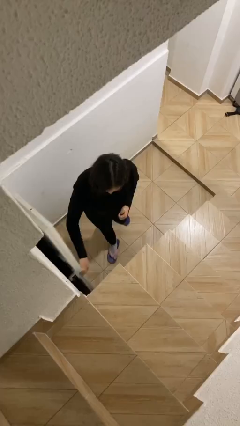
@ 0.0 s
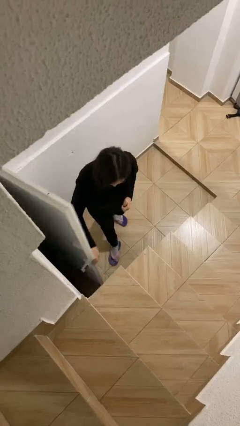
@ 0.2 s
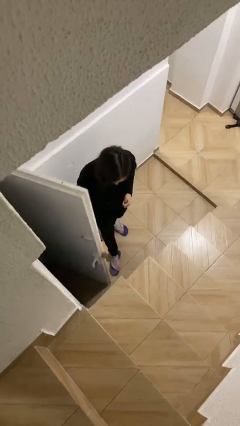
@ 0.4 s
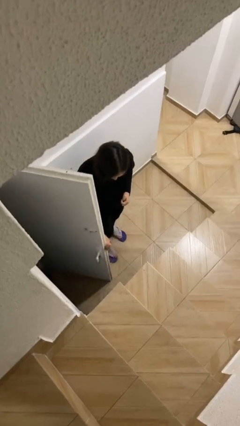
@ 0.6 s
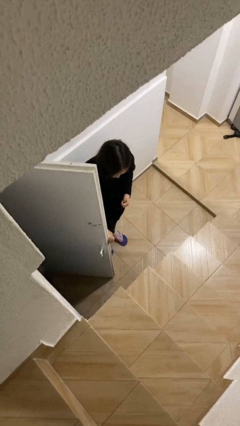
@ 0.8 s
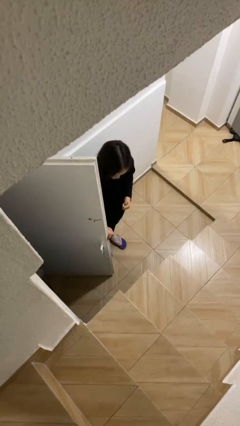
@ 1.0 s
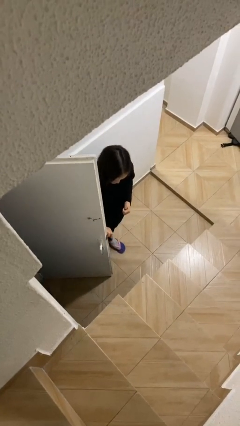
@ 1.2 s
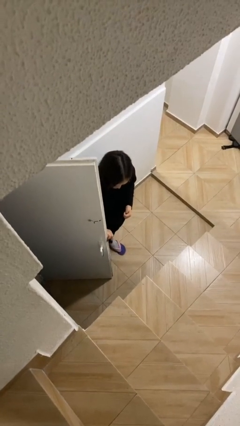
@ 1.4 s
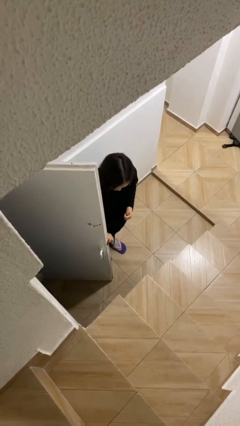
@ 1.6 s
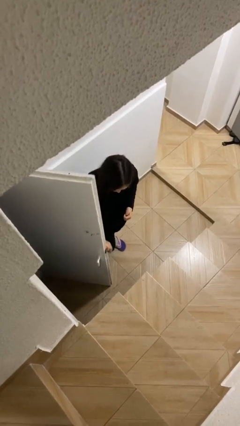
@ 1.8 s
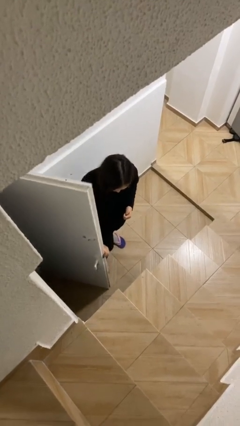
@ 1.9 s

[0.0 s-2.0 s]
person opens facility door

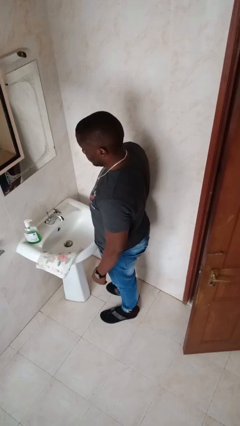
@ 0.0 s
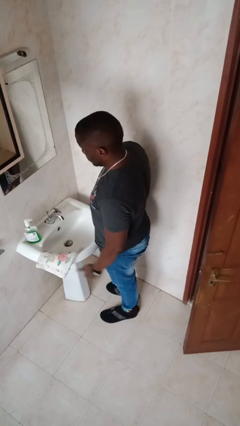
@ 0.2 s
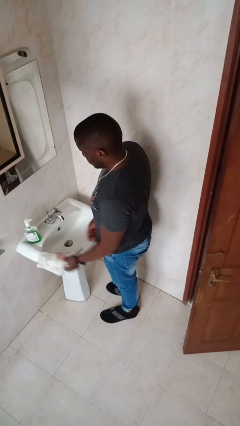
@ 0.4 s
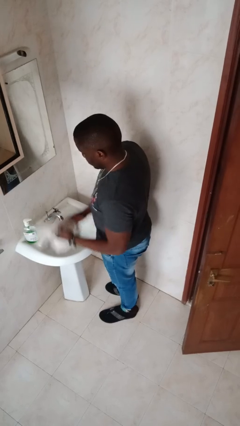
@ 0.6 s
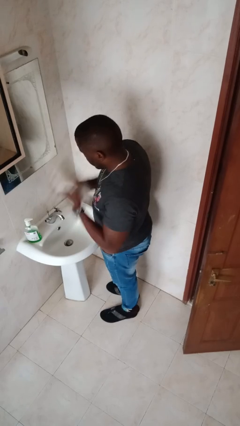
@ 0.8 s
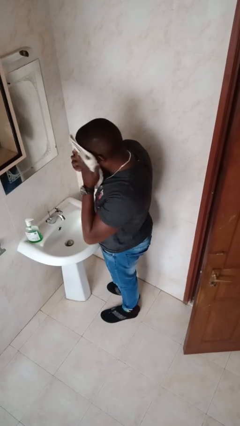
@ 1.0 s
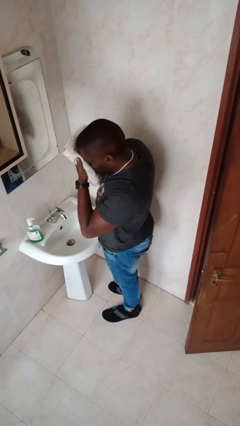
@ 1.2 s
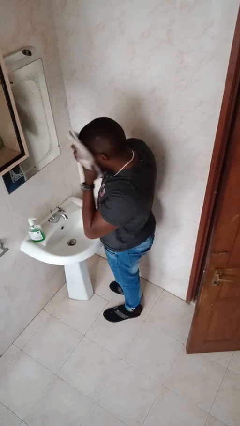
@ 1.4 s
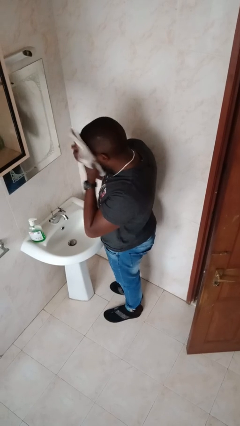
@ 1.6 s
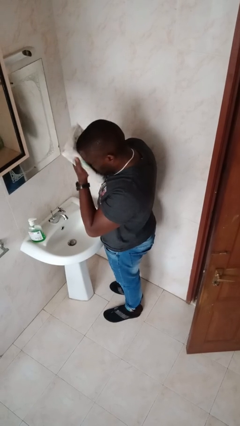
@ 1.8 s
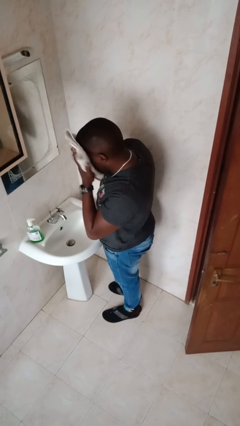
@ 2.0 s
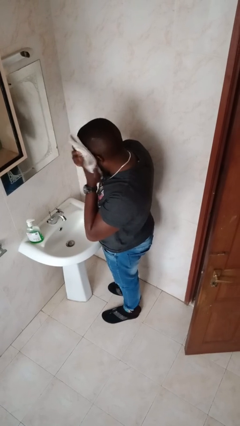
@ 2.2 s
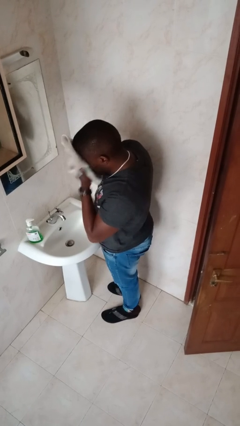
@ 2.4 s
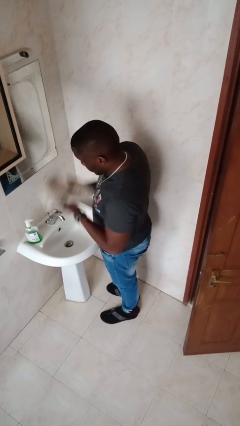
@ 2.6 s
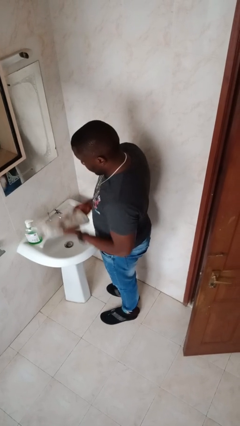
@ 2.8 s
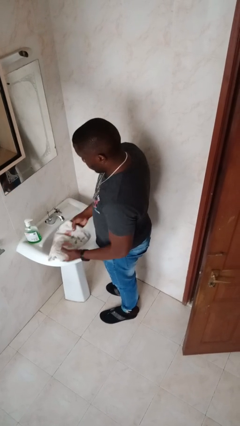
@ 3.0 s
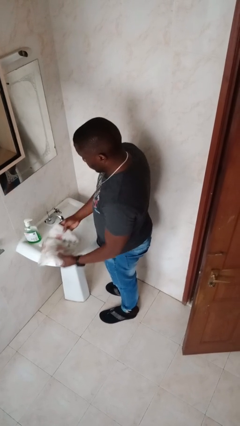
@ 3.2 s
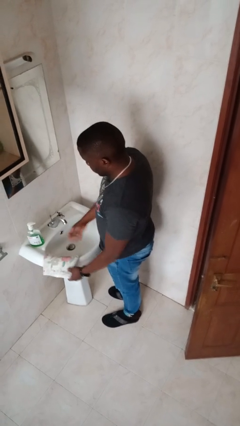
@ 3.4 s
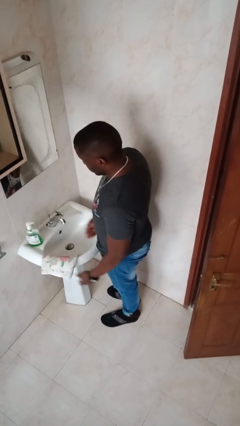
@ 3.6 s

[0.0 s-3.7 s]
person dries face with towel

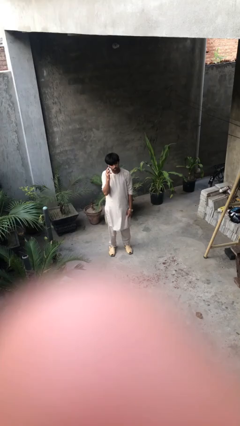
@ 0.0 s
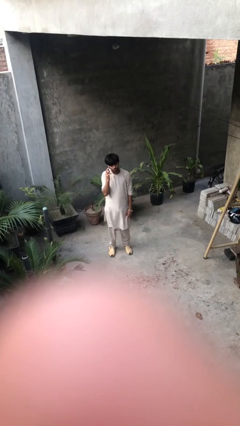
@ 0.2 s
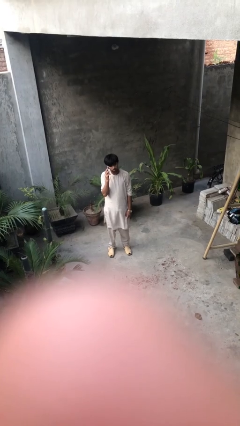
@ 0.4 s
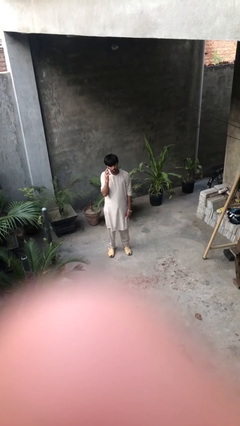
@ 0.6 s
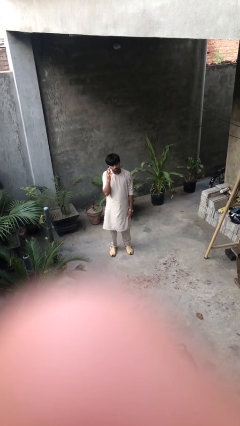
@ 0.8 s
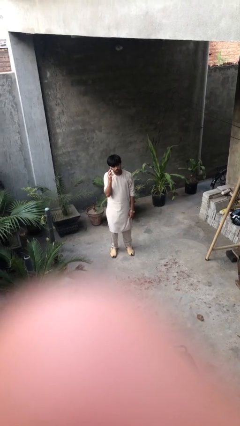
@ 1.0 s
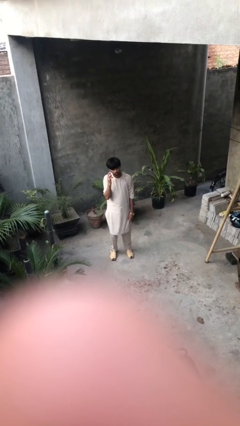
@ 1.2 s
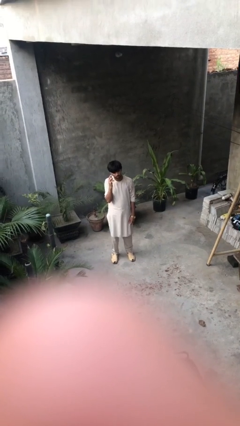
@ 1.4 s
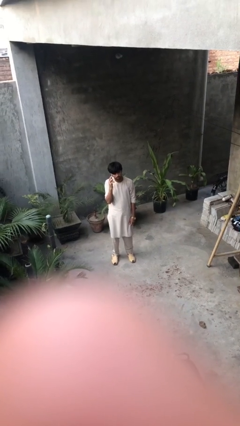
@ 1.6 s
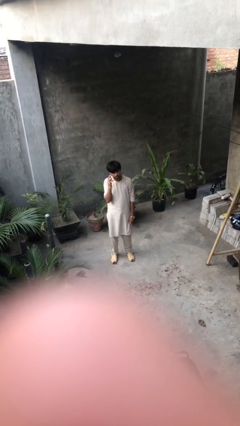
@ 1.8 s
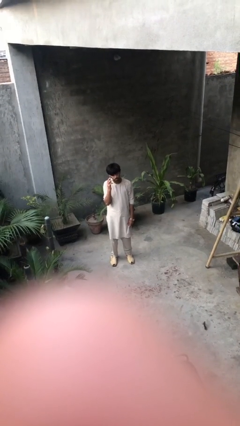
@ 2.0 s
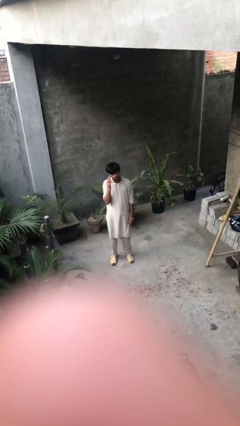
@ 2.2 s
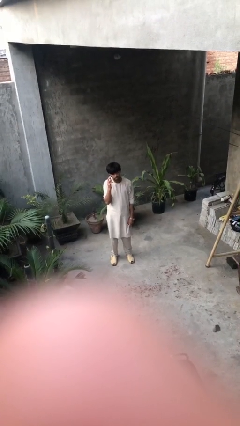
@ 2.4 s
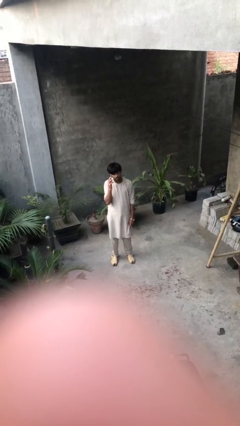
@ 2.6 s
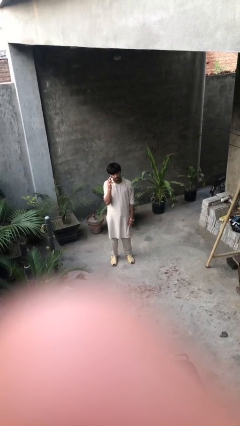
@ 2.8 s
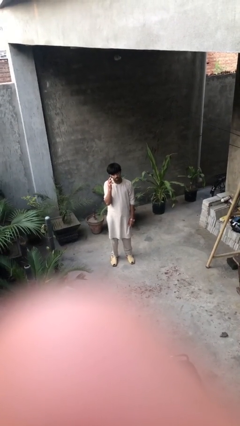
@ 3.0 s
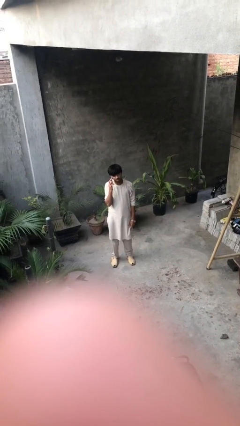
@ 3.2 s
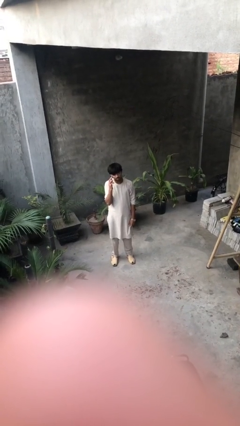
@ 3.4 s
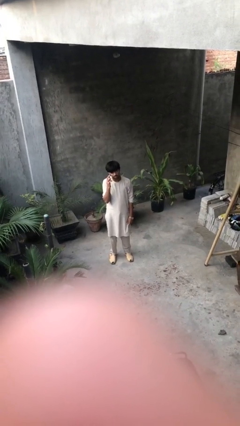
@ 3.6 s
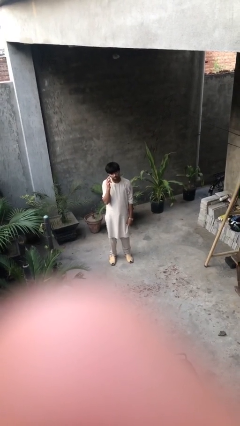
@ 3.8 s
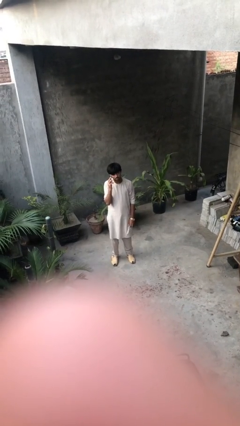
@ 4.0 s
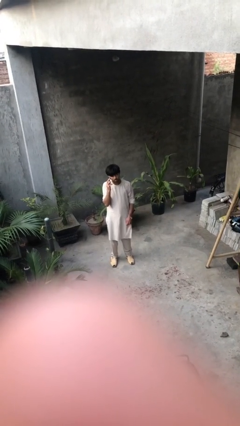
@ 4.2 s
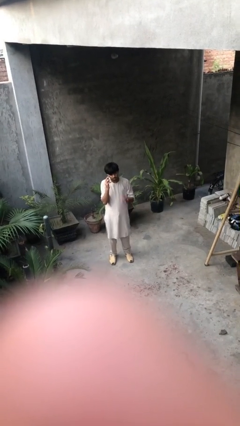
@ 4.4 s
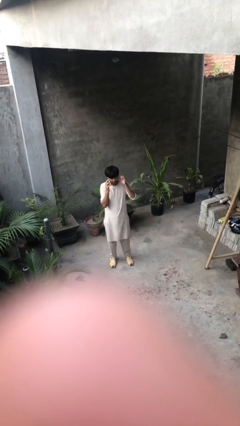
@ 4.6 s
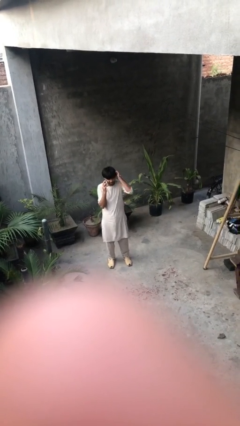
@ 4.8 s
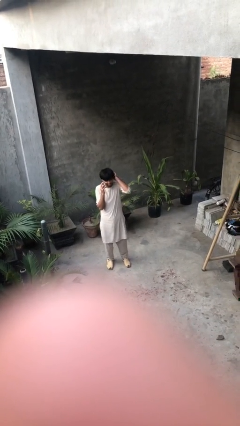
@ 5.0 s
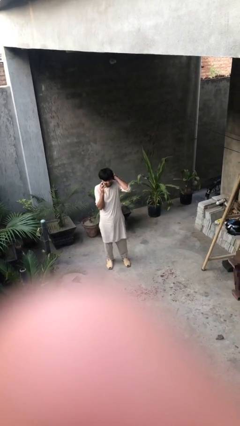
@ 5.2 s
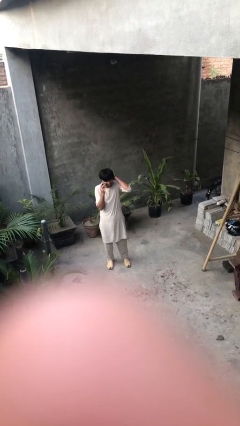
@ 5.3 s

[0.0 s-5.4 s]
person talks on phone

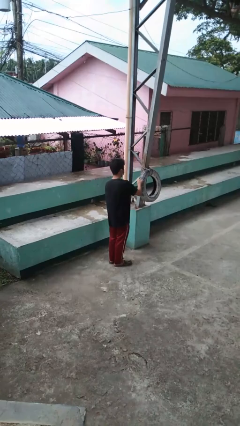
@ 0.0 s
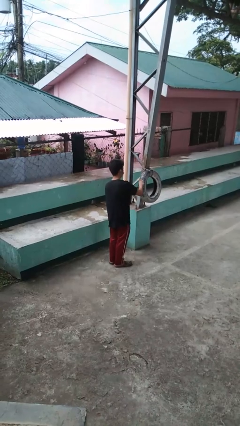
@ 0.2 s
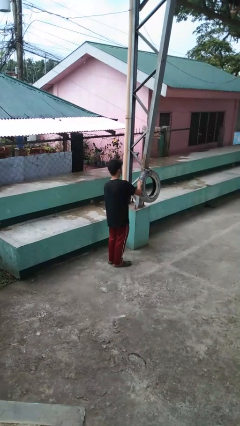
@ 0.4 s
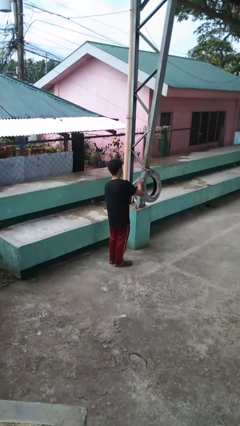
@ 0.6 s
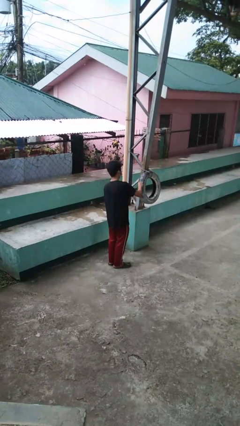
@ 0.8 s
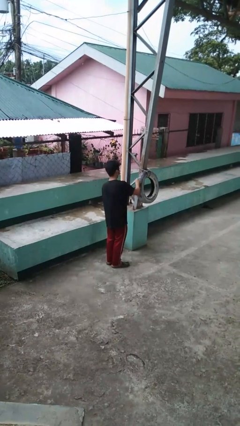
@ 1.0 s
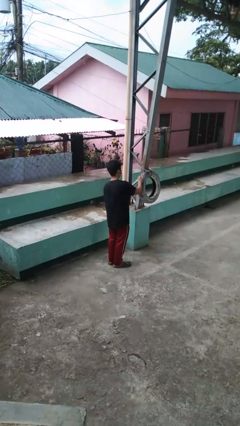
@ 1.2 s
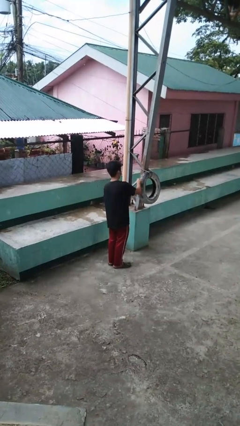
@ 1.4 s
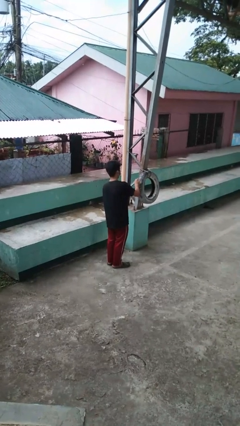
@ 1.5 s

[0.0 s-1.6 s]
person taps object with finger

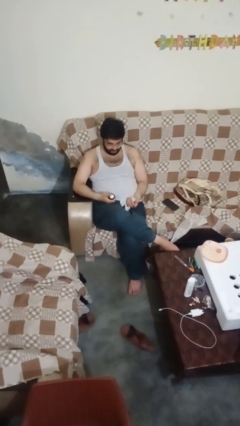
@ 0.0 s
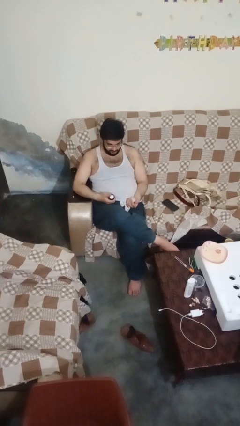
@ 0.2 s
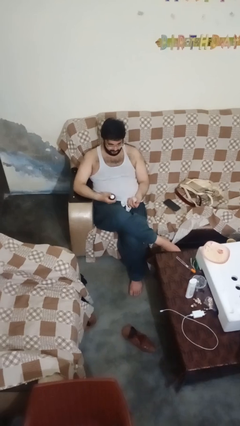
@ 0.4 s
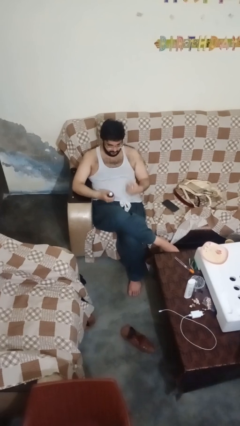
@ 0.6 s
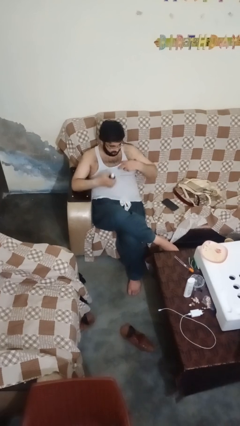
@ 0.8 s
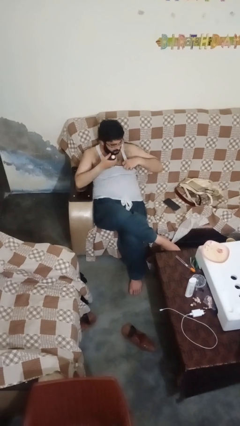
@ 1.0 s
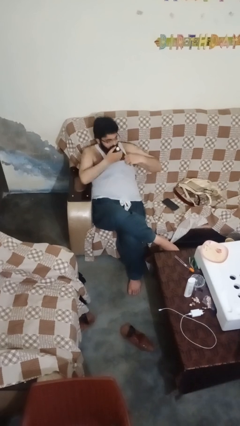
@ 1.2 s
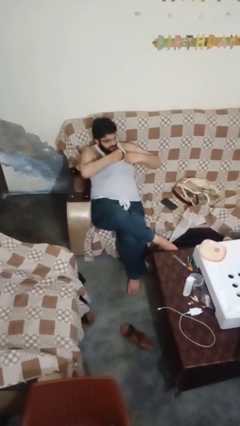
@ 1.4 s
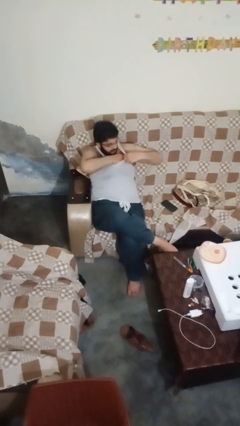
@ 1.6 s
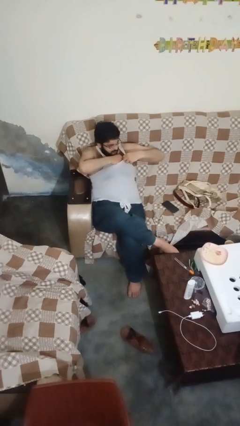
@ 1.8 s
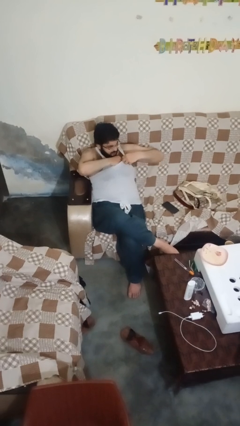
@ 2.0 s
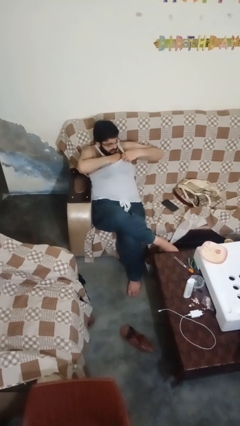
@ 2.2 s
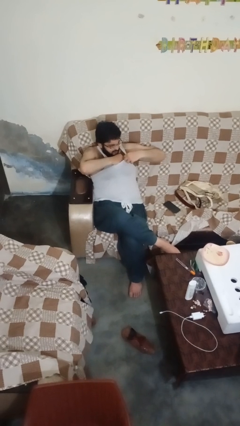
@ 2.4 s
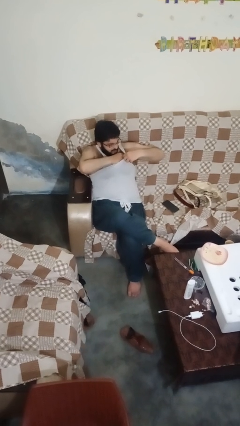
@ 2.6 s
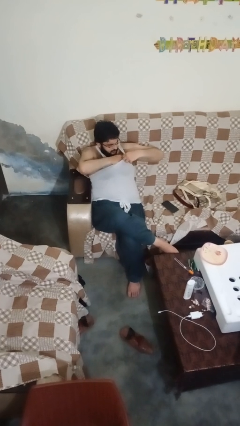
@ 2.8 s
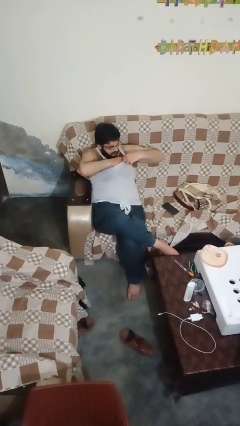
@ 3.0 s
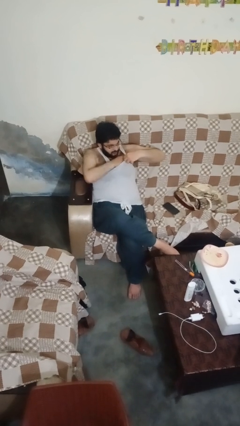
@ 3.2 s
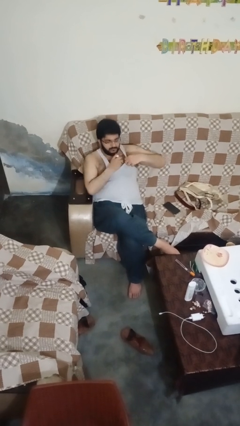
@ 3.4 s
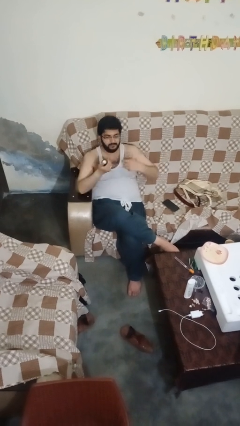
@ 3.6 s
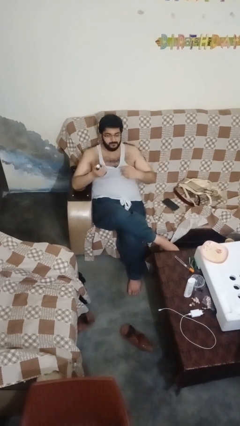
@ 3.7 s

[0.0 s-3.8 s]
person applies deodorant

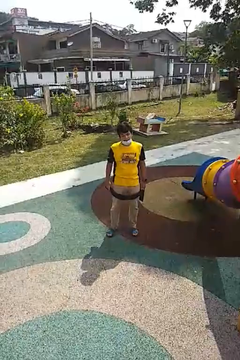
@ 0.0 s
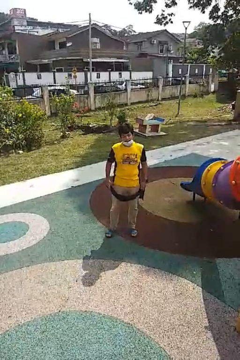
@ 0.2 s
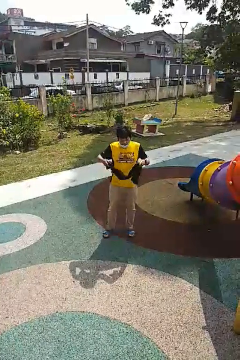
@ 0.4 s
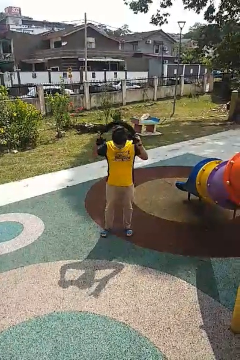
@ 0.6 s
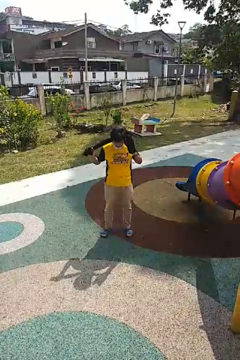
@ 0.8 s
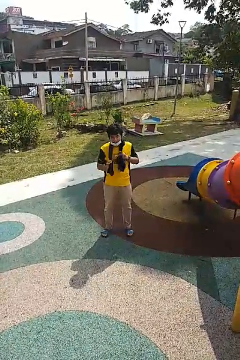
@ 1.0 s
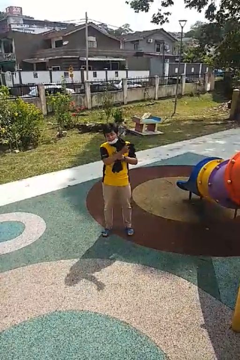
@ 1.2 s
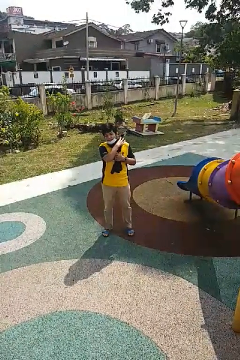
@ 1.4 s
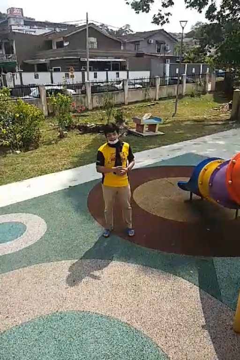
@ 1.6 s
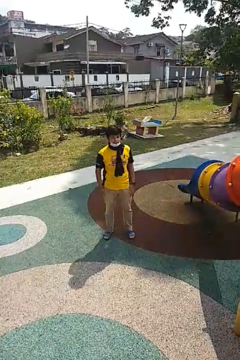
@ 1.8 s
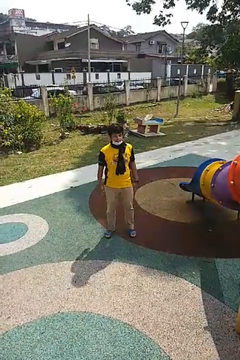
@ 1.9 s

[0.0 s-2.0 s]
person puts on scarf
